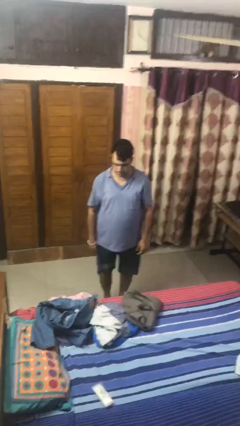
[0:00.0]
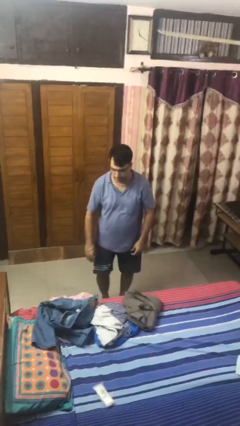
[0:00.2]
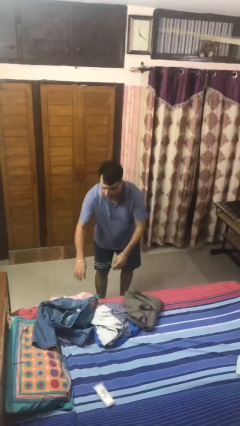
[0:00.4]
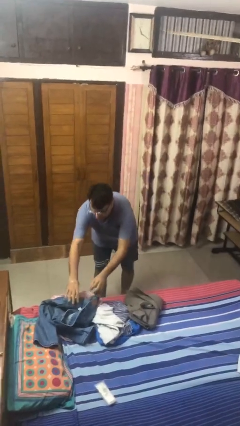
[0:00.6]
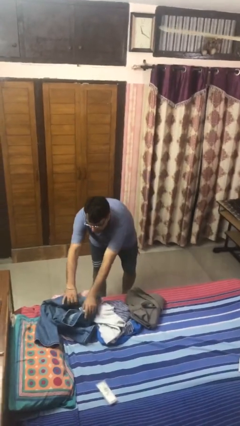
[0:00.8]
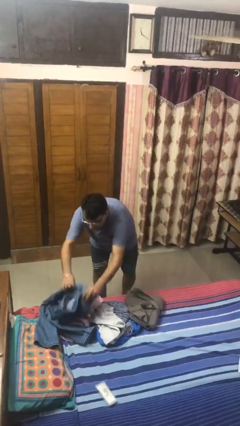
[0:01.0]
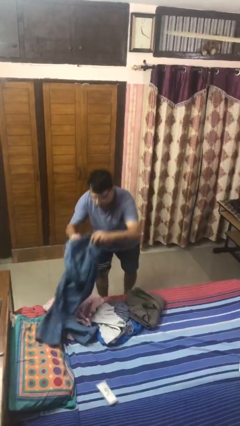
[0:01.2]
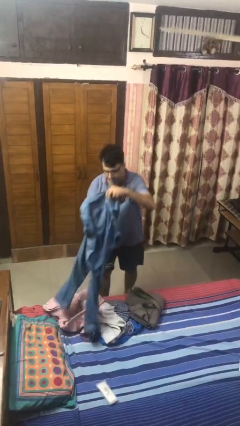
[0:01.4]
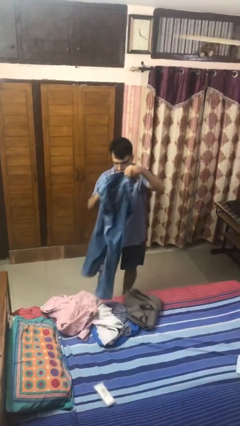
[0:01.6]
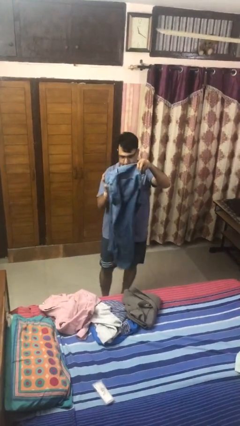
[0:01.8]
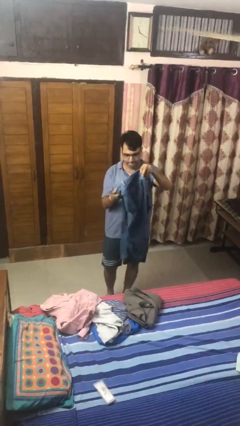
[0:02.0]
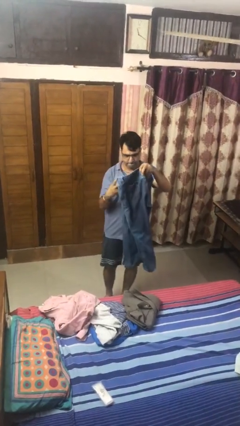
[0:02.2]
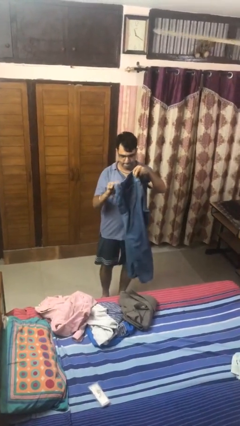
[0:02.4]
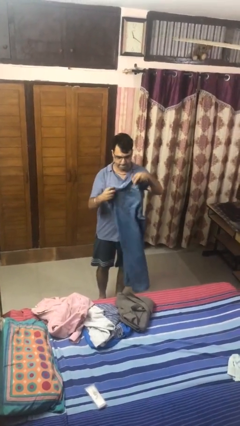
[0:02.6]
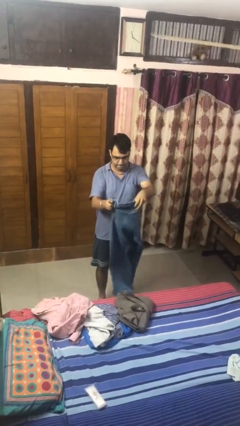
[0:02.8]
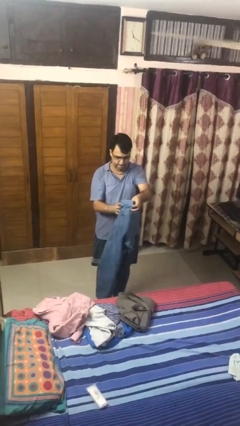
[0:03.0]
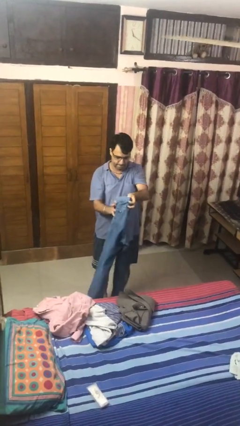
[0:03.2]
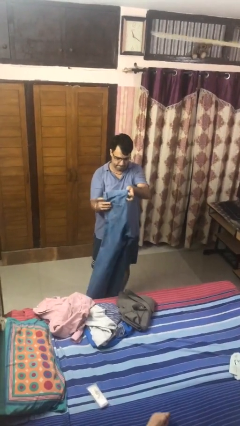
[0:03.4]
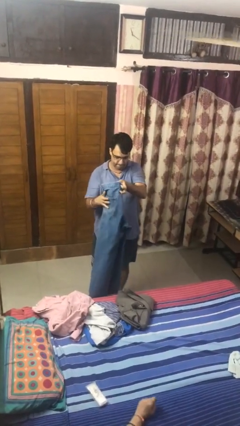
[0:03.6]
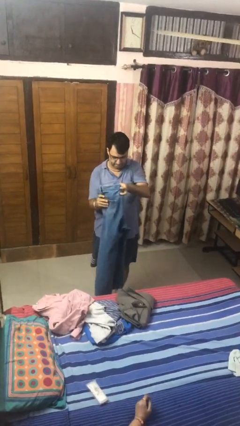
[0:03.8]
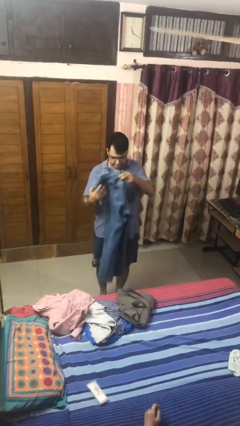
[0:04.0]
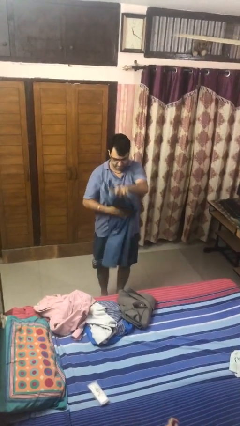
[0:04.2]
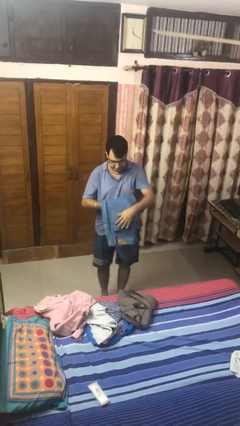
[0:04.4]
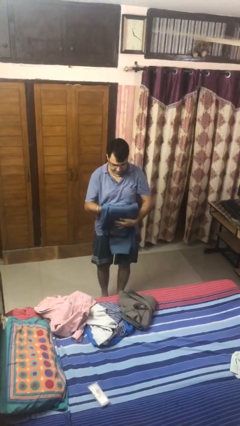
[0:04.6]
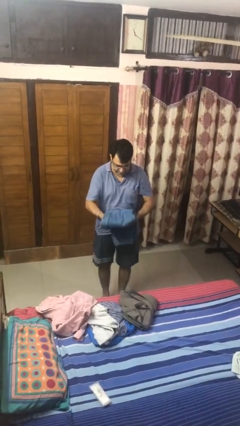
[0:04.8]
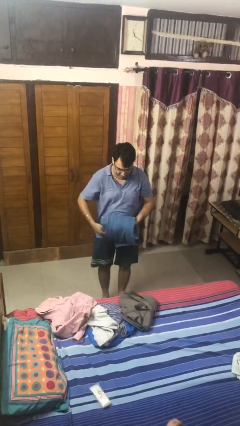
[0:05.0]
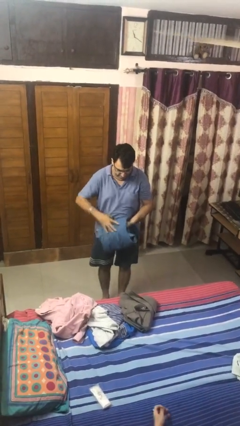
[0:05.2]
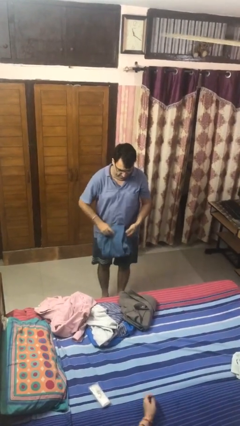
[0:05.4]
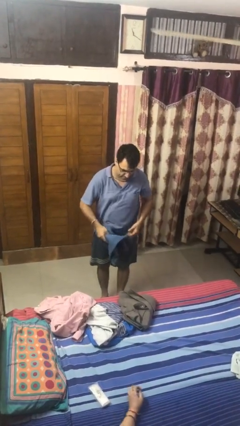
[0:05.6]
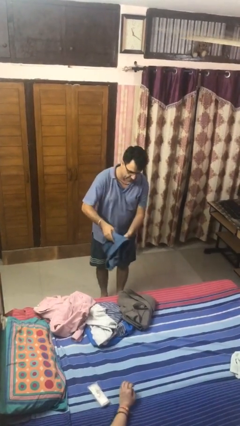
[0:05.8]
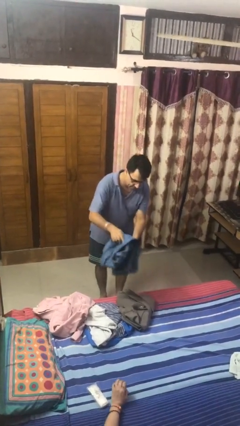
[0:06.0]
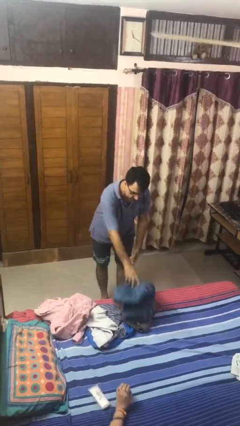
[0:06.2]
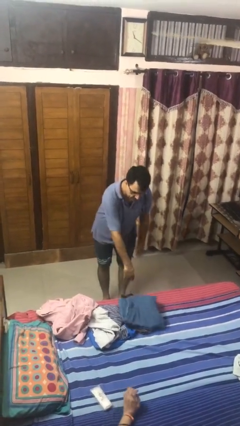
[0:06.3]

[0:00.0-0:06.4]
person folds pants

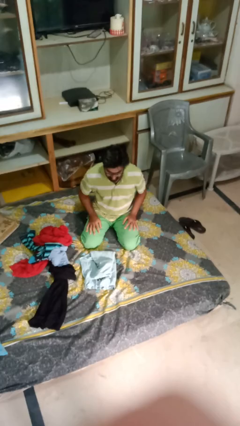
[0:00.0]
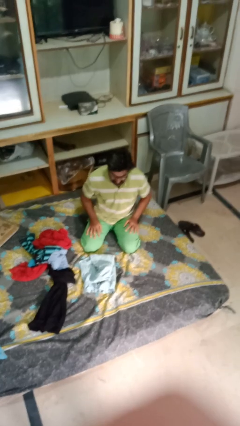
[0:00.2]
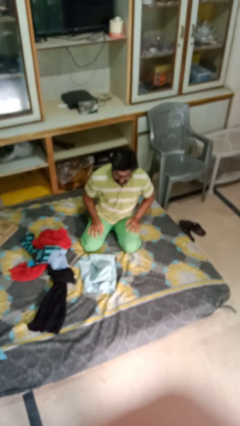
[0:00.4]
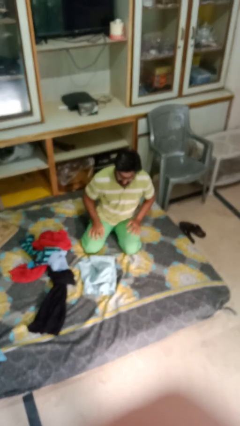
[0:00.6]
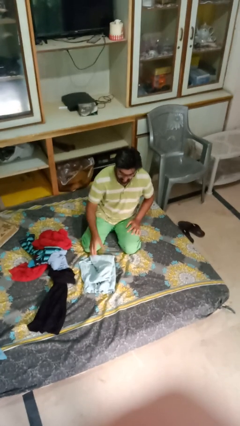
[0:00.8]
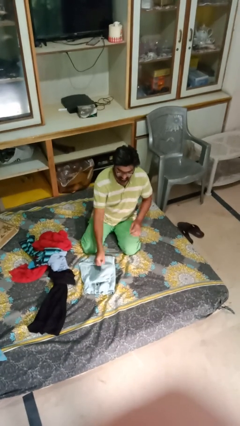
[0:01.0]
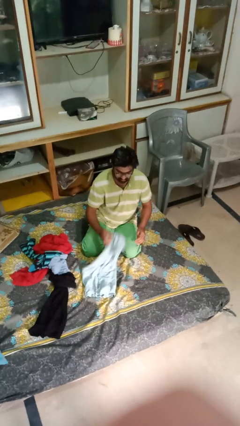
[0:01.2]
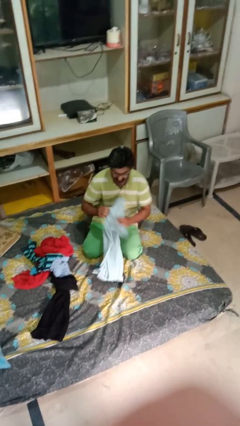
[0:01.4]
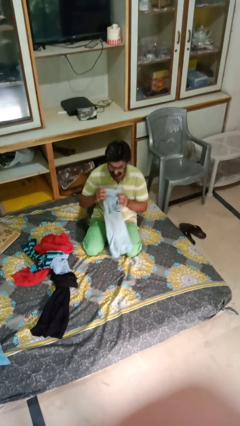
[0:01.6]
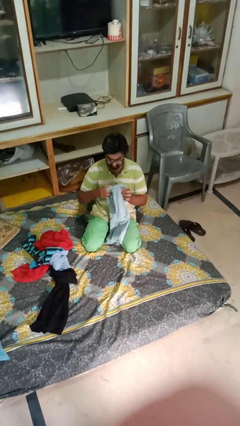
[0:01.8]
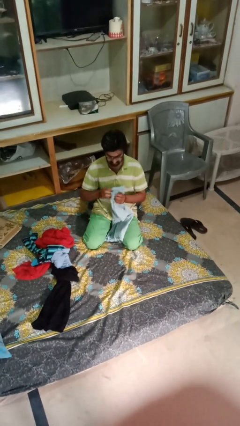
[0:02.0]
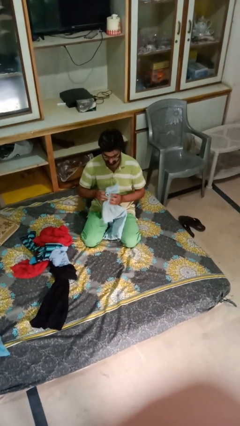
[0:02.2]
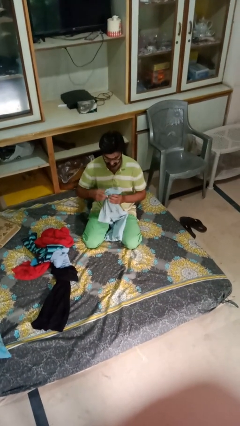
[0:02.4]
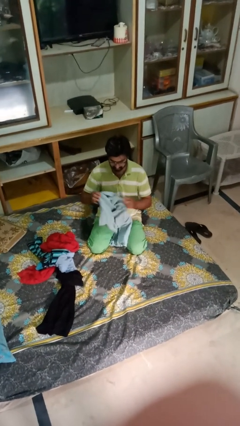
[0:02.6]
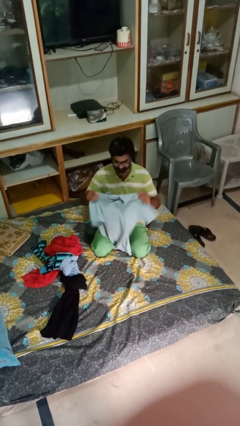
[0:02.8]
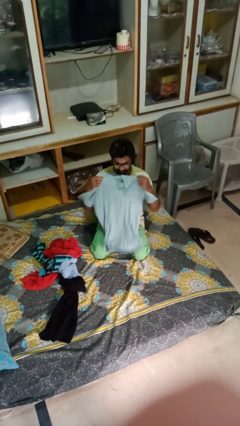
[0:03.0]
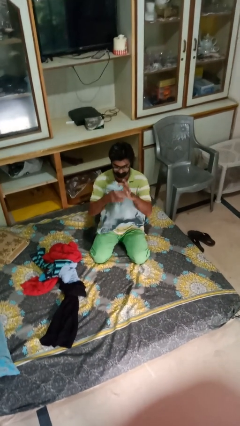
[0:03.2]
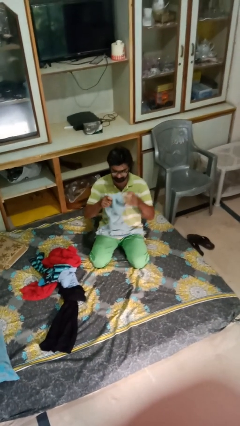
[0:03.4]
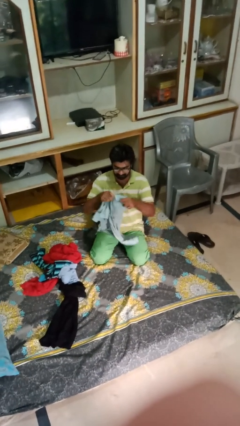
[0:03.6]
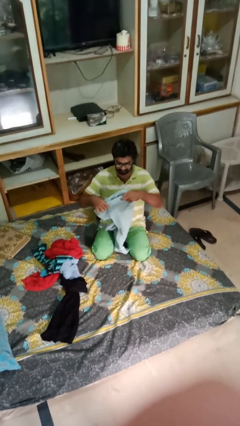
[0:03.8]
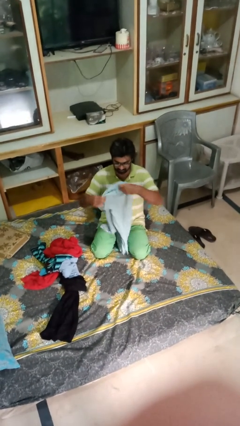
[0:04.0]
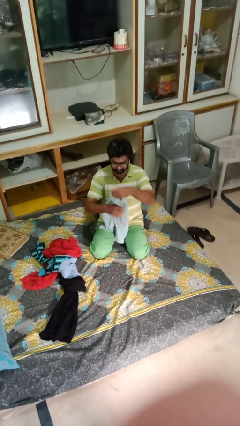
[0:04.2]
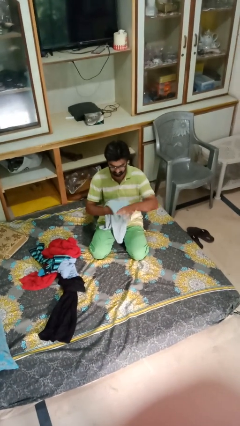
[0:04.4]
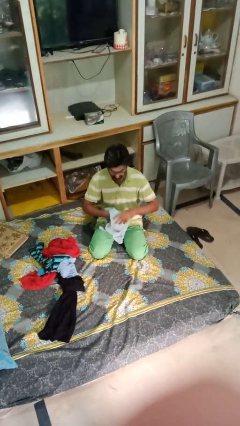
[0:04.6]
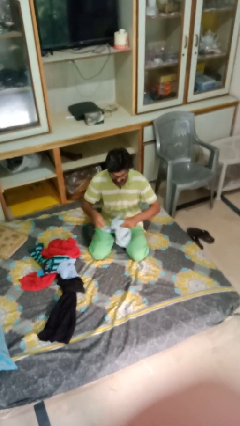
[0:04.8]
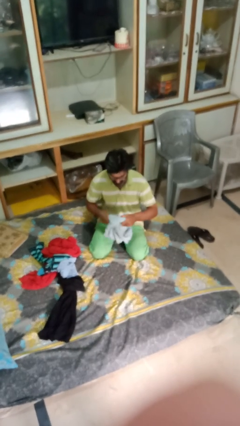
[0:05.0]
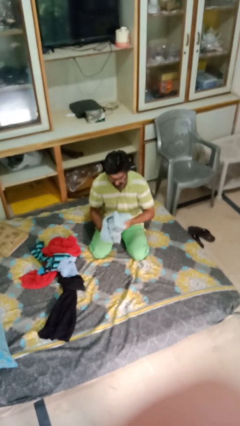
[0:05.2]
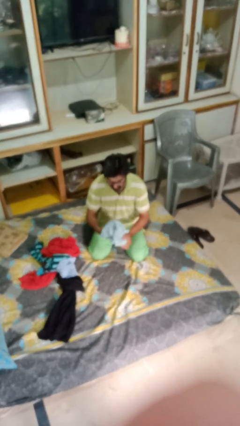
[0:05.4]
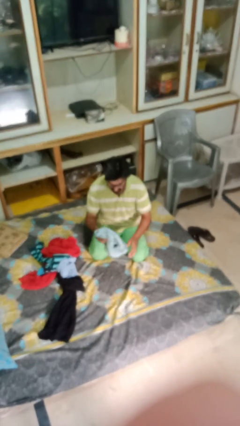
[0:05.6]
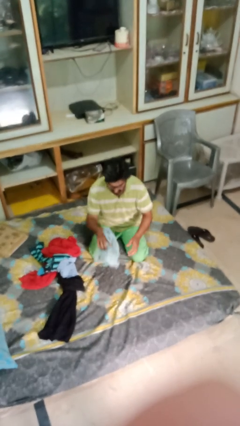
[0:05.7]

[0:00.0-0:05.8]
person folds shirt

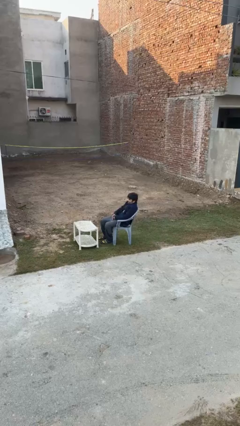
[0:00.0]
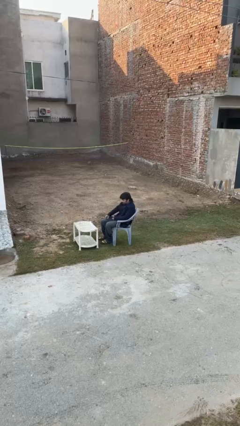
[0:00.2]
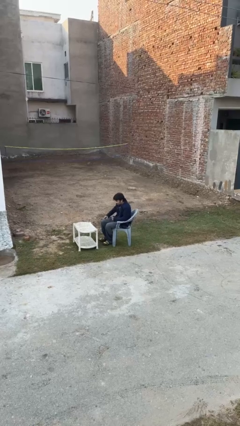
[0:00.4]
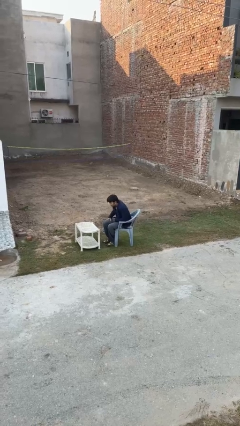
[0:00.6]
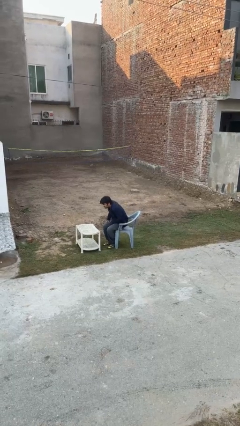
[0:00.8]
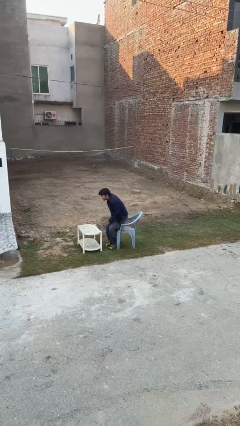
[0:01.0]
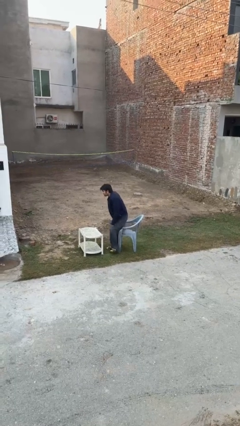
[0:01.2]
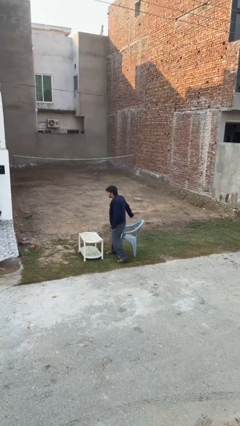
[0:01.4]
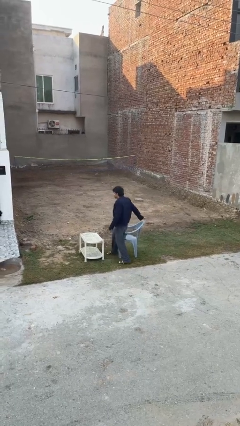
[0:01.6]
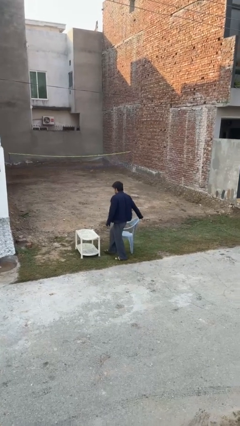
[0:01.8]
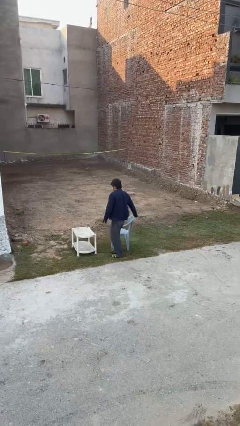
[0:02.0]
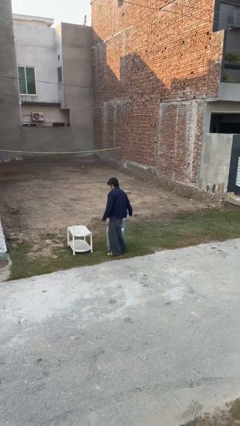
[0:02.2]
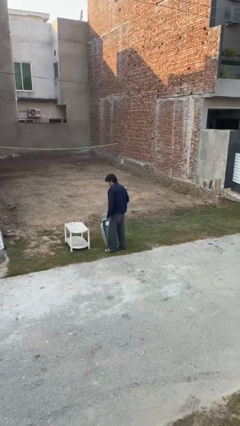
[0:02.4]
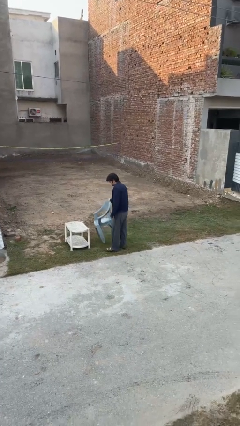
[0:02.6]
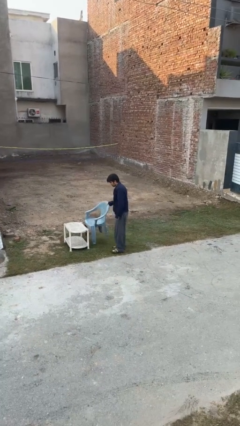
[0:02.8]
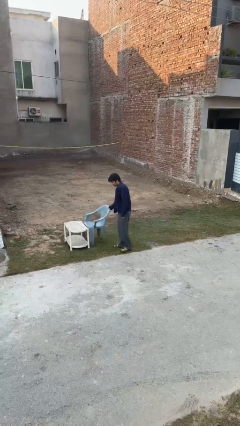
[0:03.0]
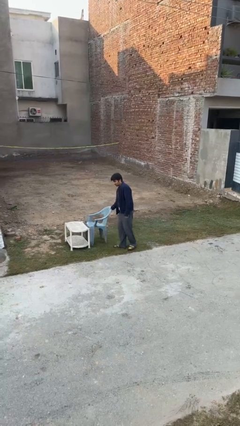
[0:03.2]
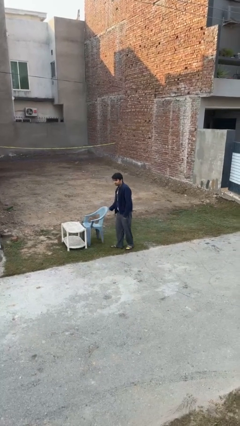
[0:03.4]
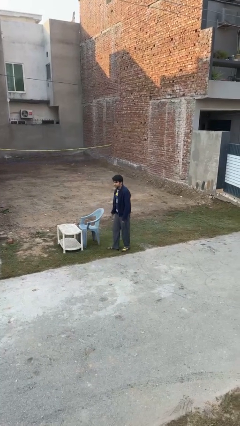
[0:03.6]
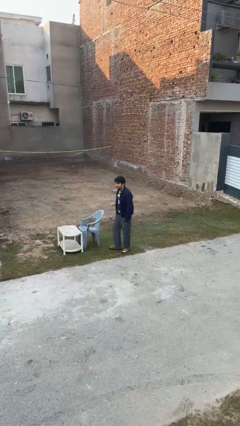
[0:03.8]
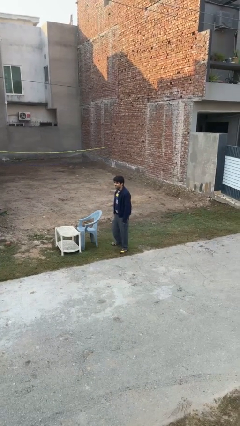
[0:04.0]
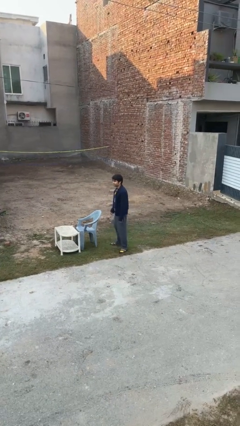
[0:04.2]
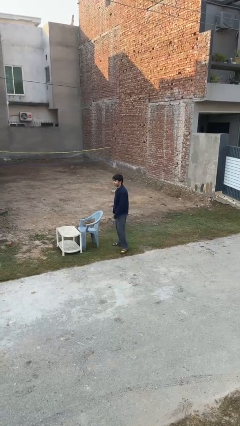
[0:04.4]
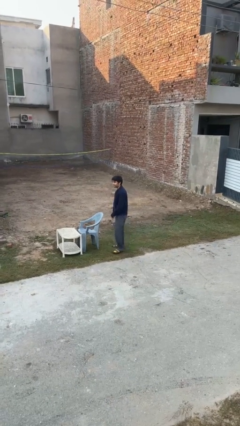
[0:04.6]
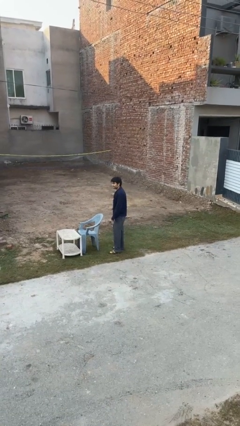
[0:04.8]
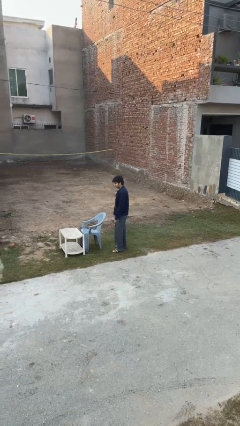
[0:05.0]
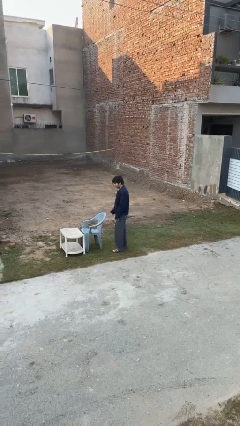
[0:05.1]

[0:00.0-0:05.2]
person stands up

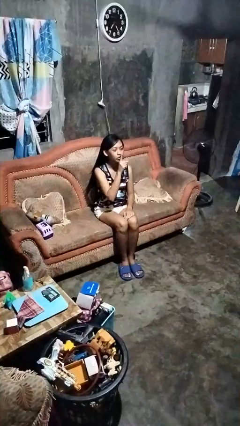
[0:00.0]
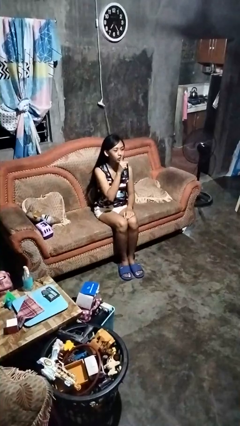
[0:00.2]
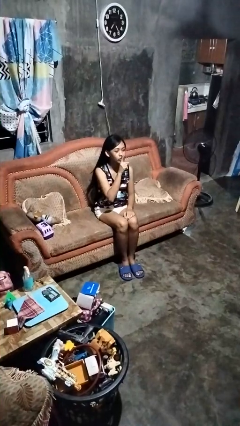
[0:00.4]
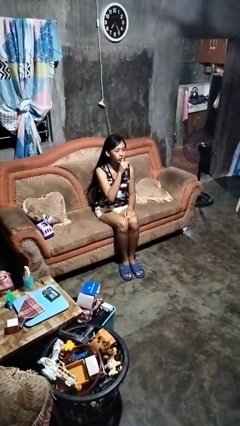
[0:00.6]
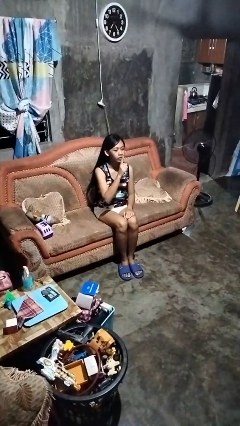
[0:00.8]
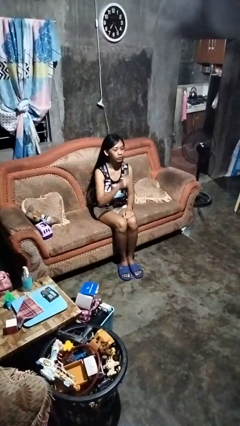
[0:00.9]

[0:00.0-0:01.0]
person gestures be quiet
